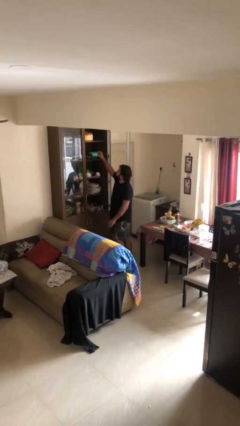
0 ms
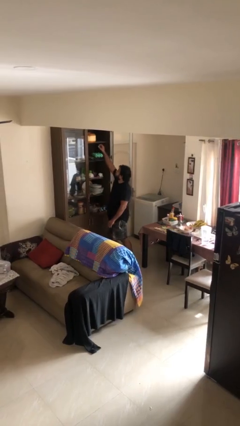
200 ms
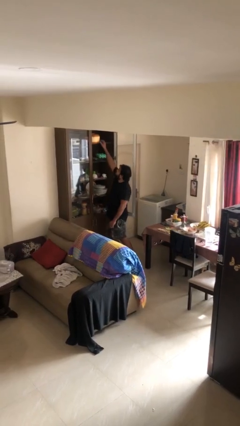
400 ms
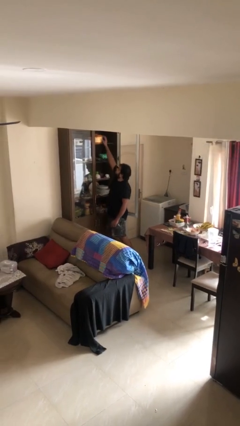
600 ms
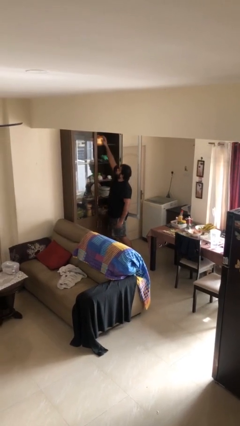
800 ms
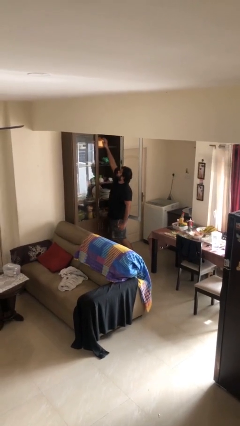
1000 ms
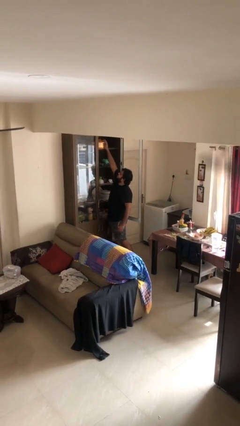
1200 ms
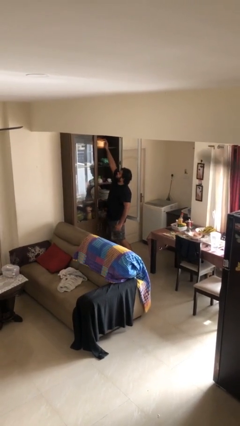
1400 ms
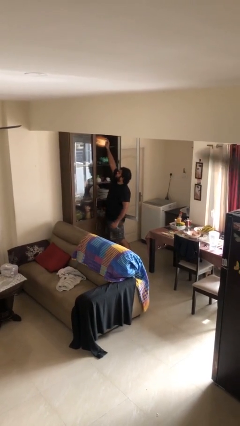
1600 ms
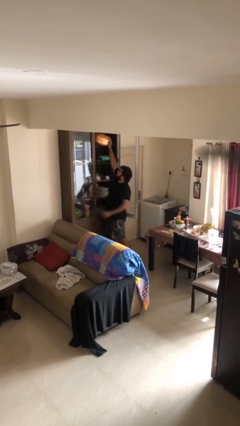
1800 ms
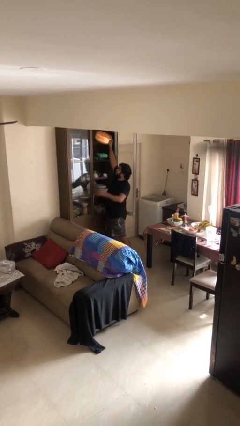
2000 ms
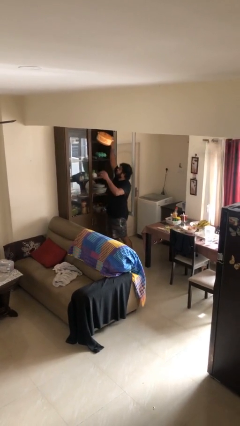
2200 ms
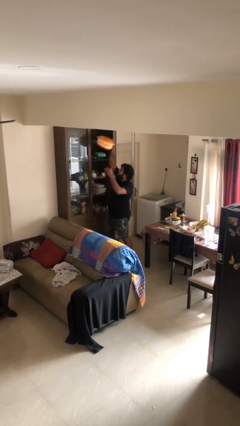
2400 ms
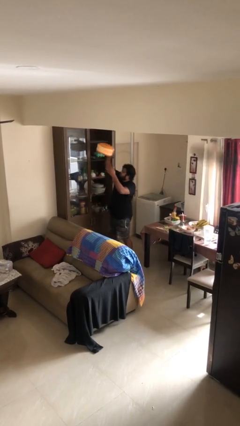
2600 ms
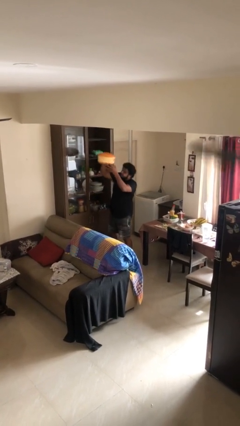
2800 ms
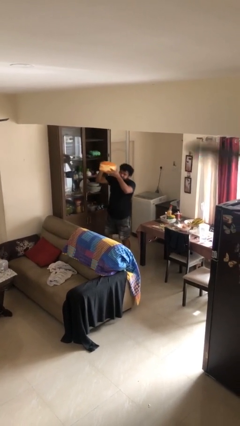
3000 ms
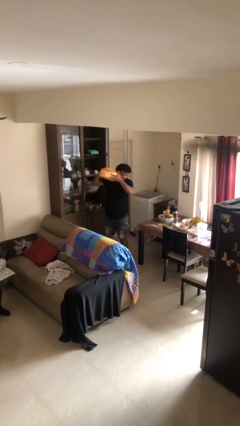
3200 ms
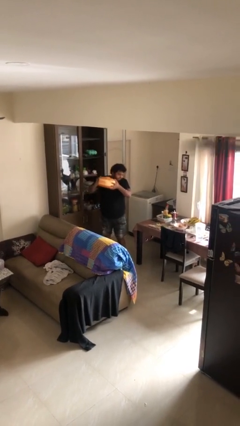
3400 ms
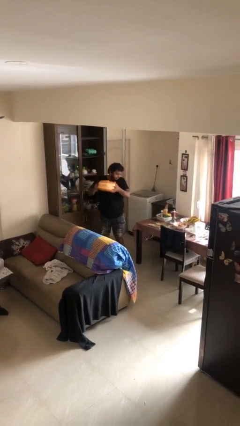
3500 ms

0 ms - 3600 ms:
person picks up object from shelf

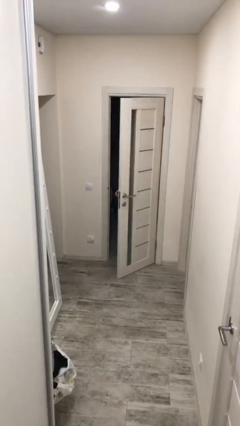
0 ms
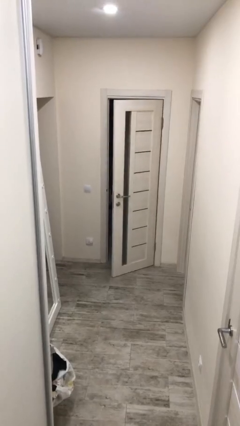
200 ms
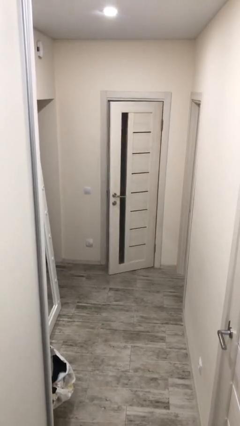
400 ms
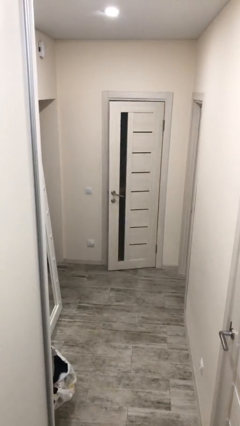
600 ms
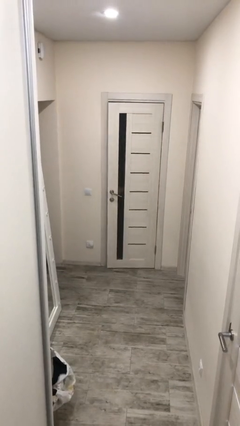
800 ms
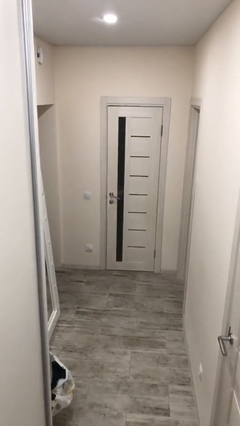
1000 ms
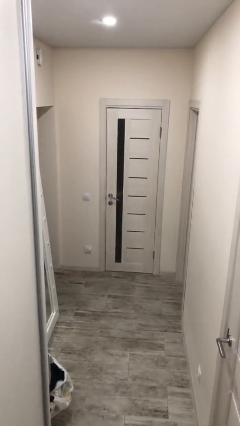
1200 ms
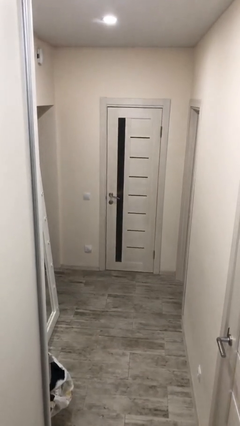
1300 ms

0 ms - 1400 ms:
person closes facility door

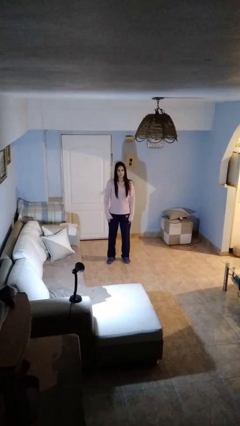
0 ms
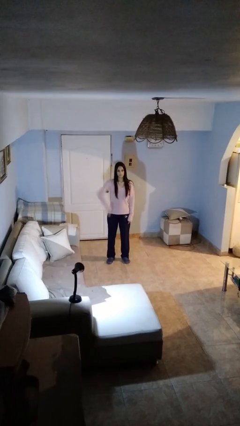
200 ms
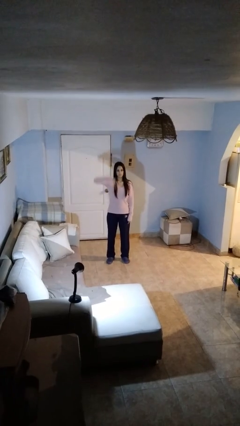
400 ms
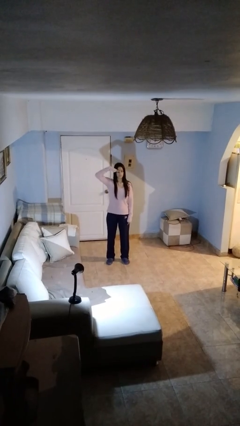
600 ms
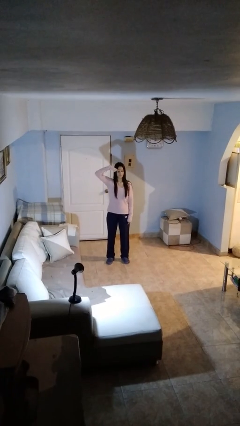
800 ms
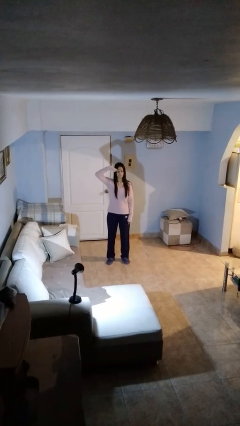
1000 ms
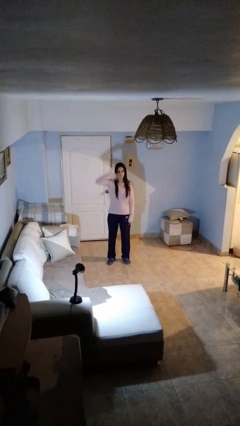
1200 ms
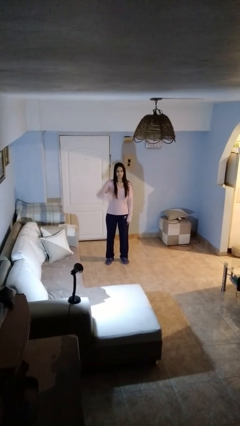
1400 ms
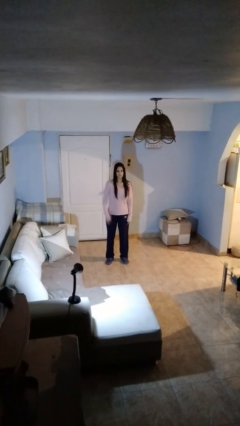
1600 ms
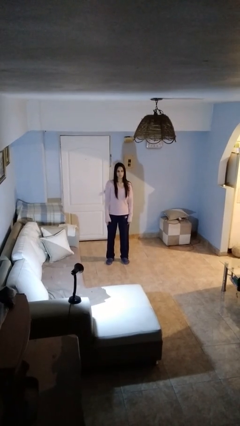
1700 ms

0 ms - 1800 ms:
person salutes

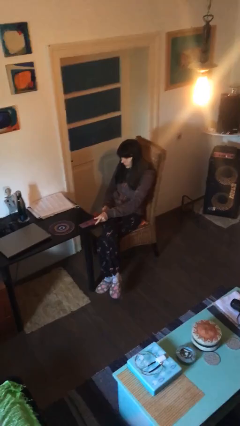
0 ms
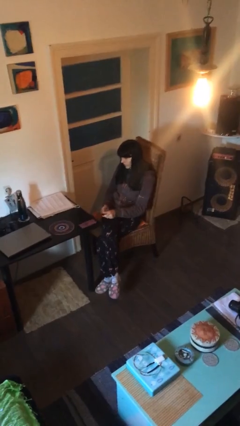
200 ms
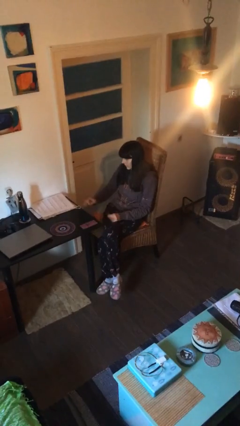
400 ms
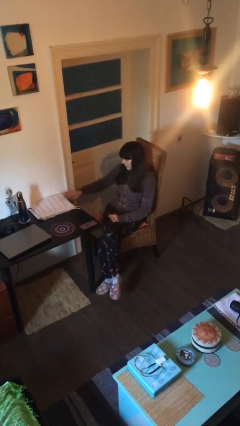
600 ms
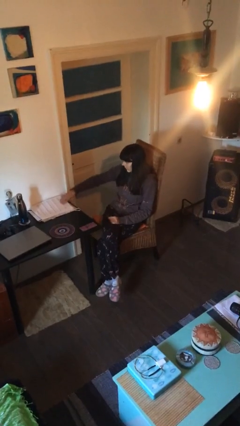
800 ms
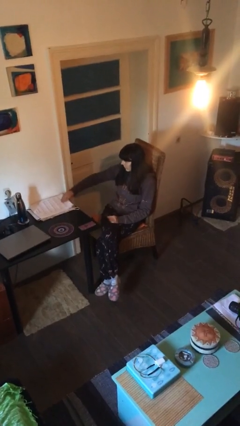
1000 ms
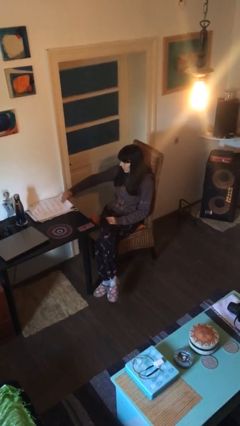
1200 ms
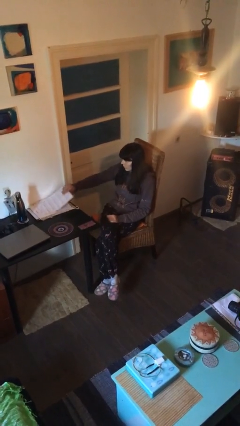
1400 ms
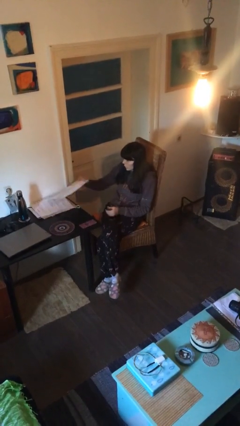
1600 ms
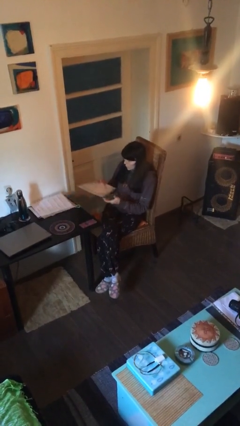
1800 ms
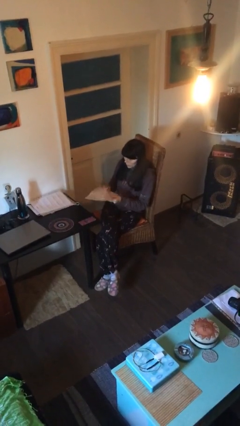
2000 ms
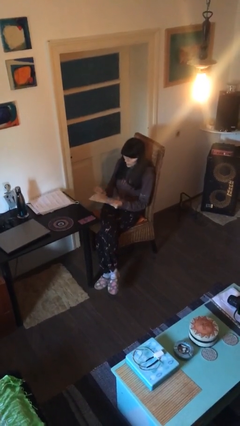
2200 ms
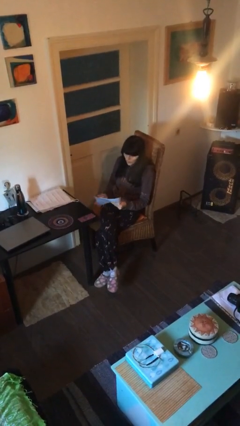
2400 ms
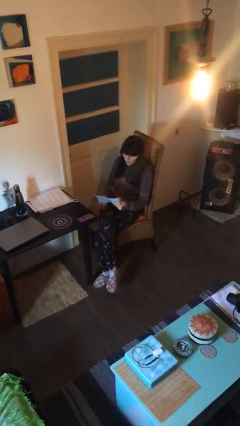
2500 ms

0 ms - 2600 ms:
person picks up object from table

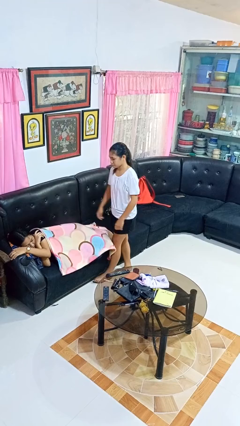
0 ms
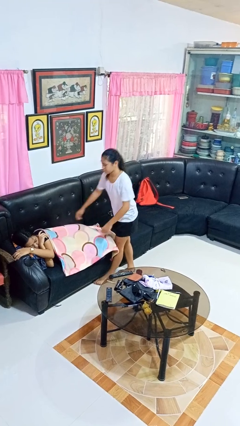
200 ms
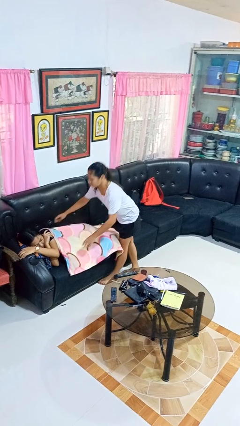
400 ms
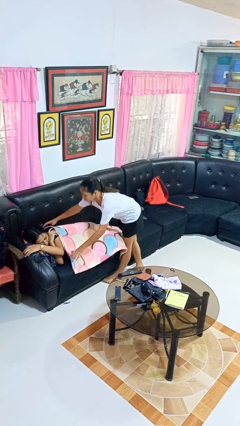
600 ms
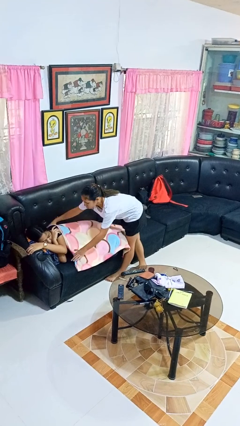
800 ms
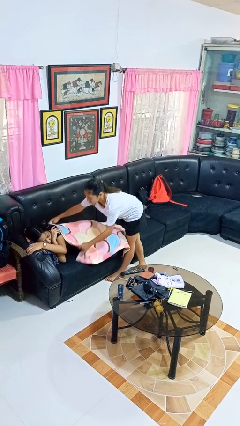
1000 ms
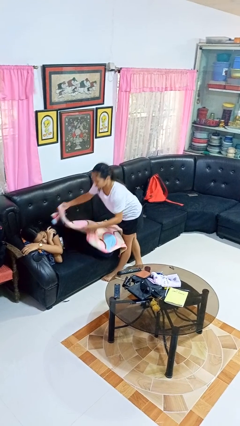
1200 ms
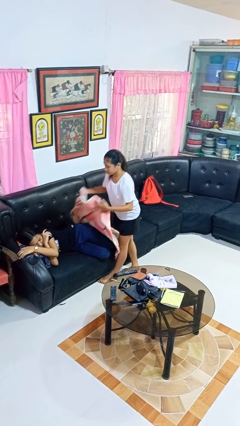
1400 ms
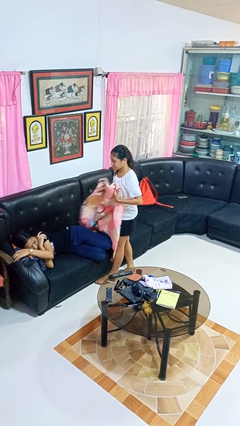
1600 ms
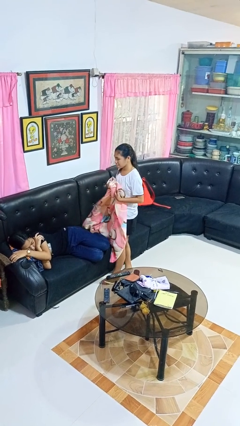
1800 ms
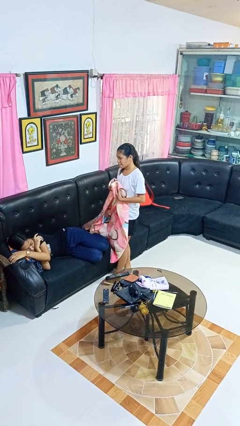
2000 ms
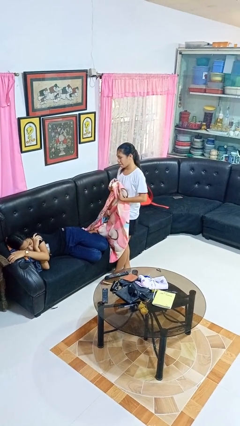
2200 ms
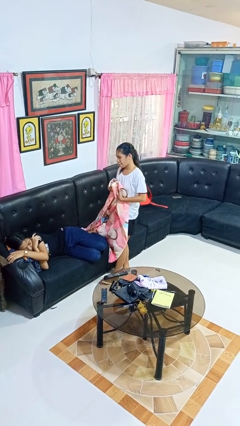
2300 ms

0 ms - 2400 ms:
person uncovers friend with blanket

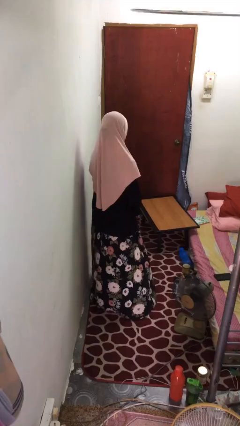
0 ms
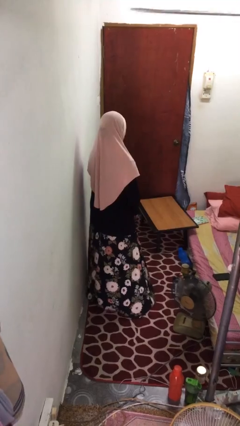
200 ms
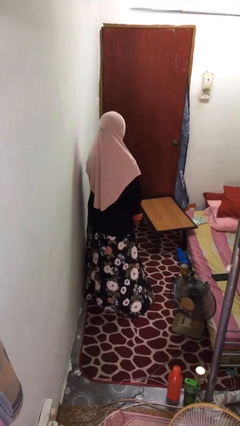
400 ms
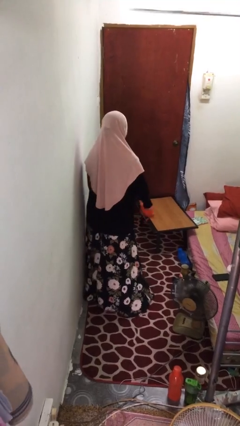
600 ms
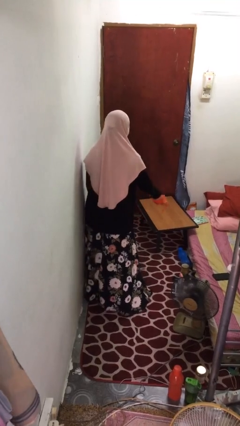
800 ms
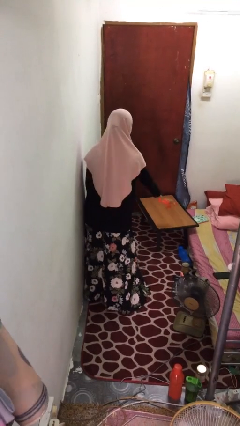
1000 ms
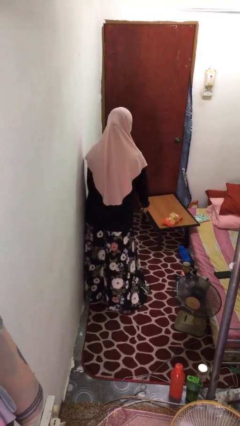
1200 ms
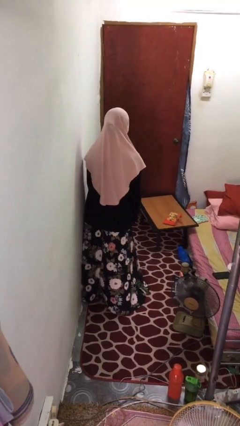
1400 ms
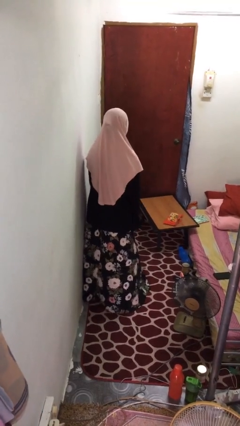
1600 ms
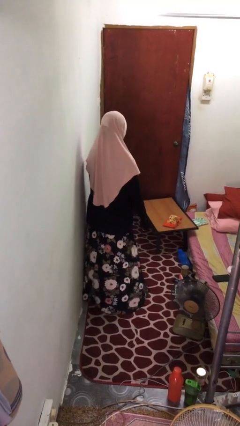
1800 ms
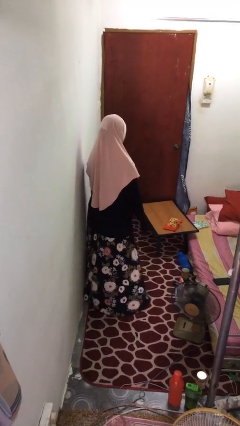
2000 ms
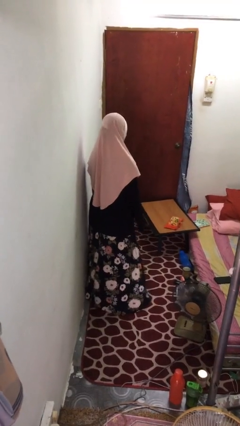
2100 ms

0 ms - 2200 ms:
person throws object on table

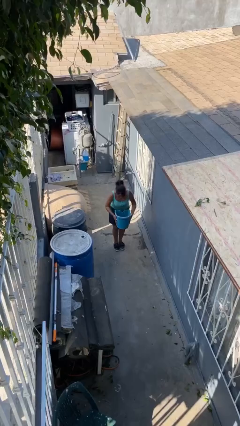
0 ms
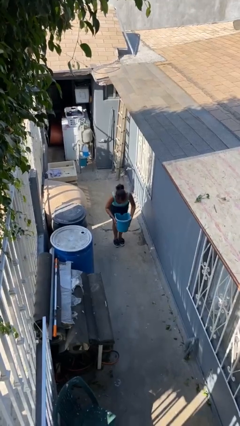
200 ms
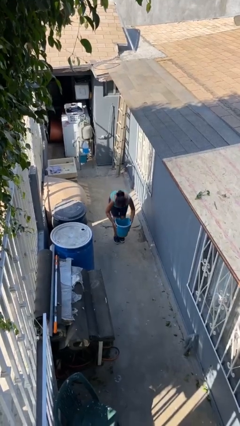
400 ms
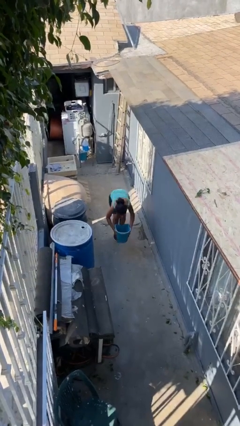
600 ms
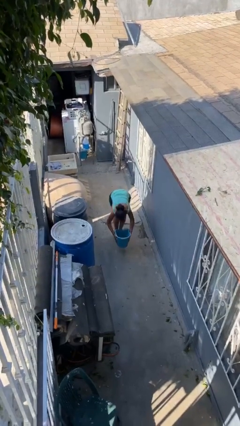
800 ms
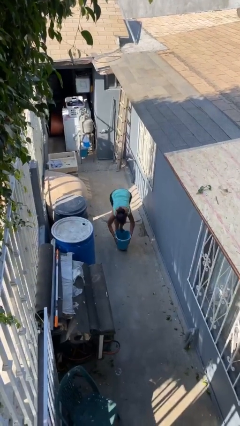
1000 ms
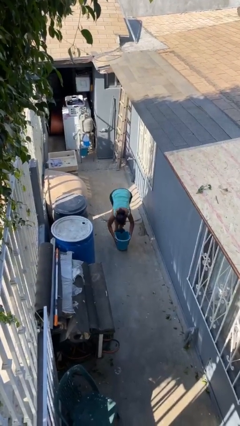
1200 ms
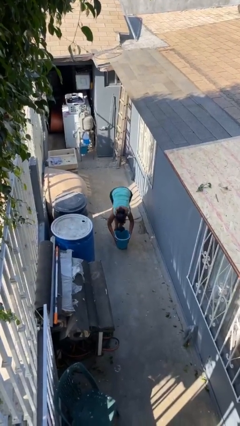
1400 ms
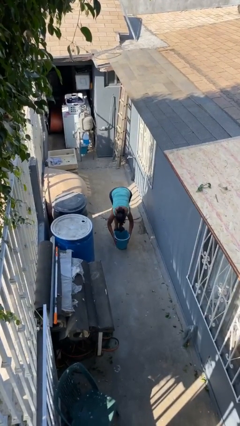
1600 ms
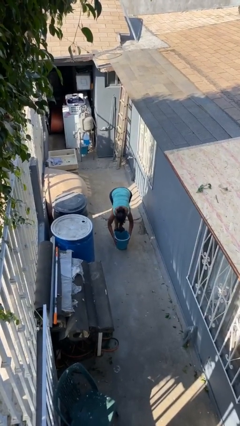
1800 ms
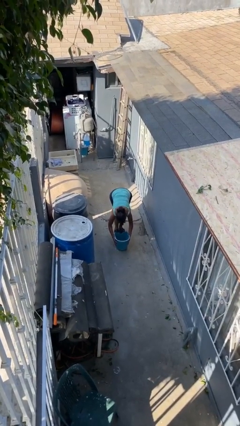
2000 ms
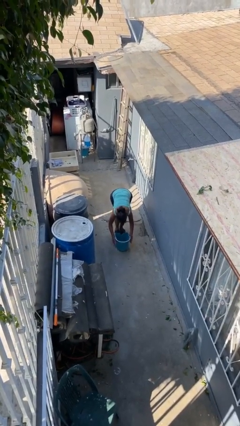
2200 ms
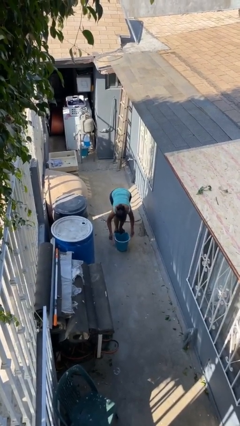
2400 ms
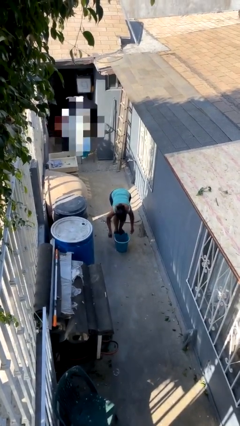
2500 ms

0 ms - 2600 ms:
person puts down object on floor
